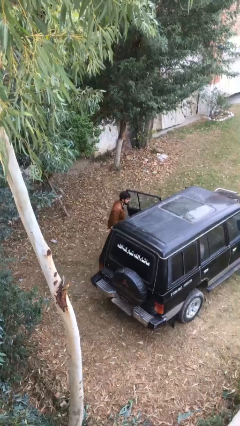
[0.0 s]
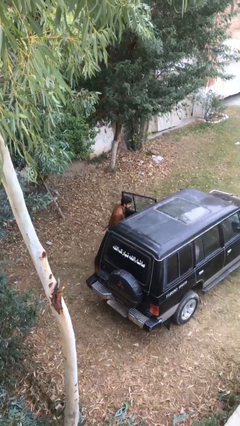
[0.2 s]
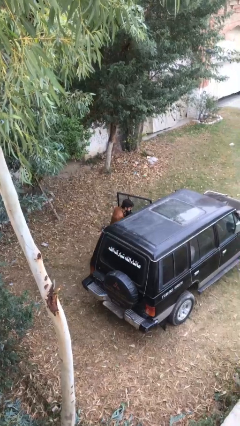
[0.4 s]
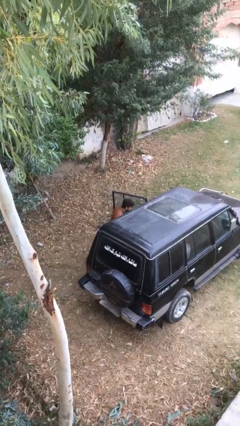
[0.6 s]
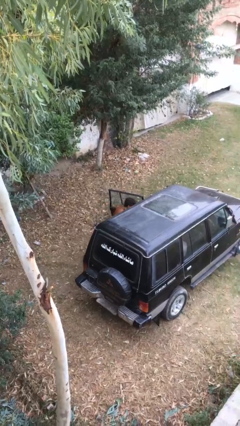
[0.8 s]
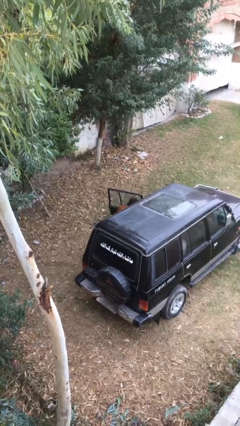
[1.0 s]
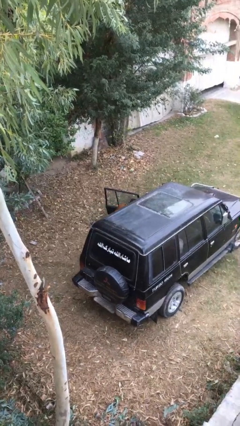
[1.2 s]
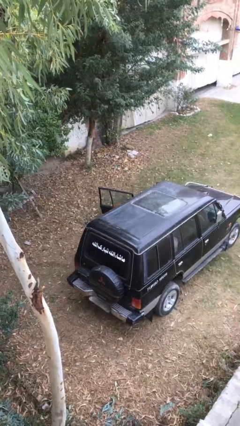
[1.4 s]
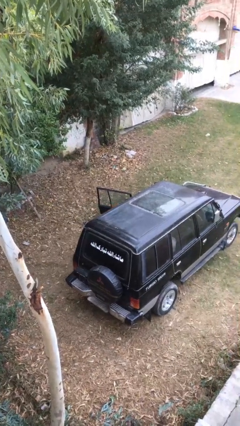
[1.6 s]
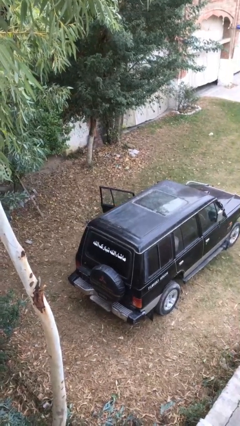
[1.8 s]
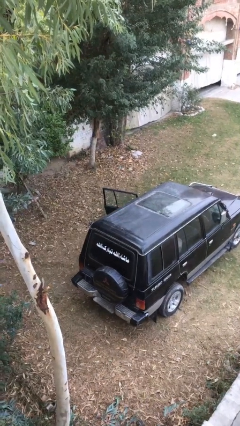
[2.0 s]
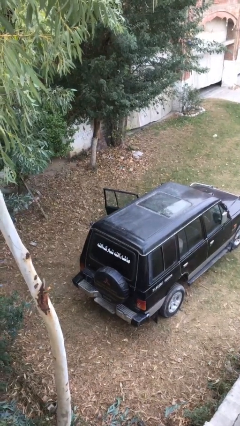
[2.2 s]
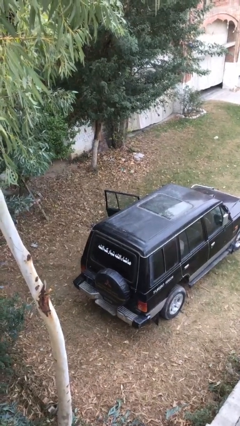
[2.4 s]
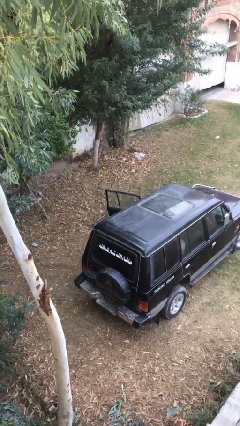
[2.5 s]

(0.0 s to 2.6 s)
person enters car

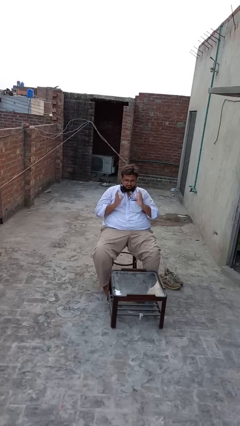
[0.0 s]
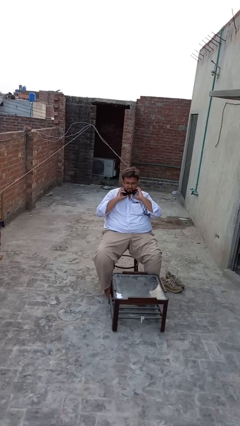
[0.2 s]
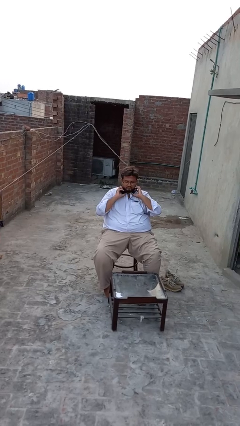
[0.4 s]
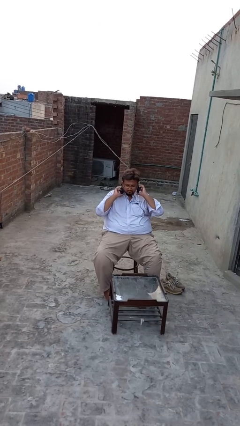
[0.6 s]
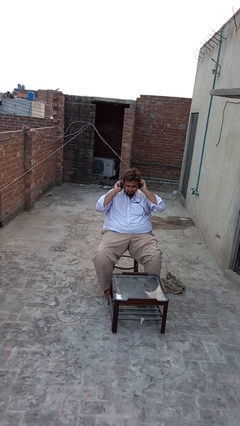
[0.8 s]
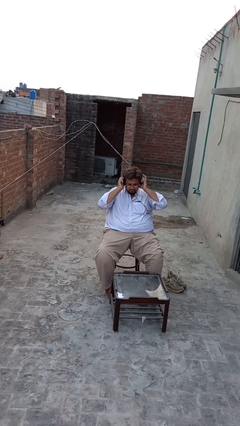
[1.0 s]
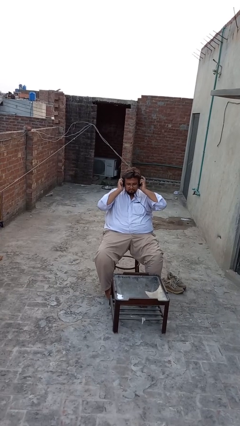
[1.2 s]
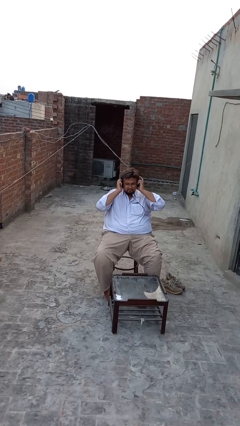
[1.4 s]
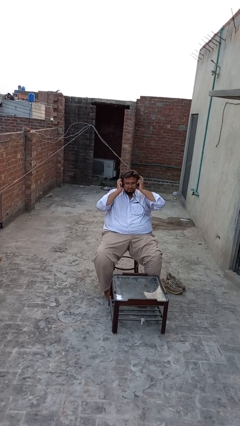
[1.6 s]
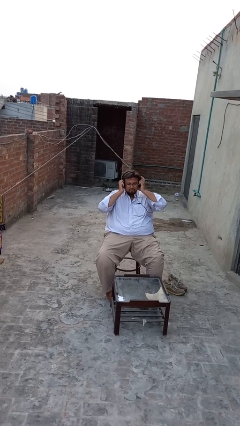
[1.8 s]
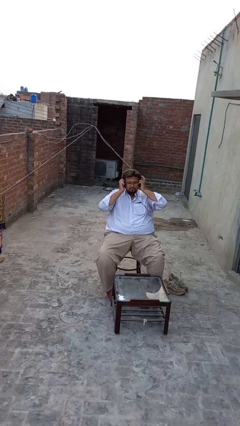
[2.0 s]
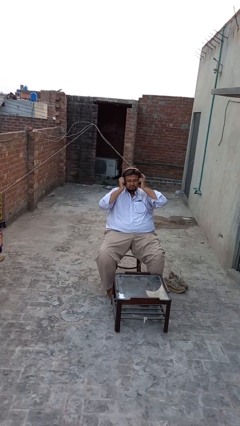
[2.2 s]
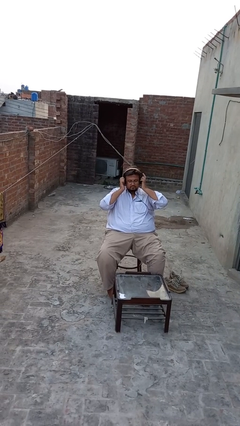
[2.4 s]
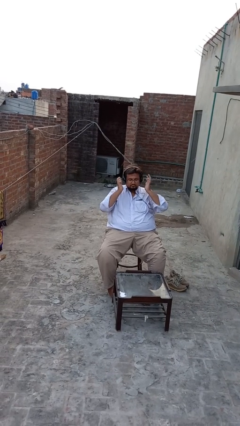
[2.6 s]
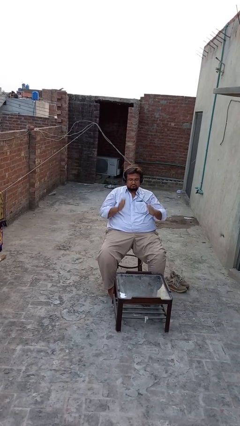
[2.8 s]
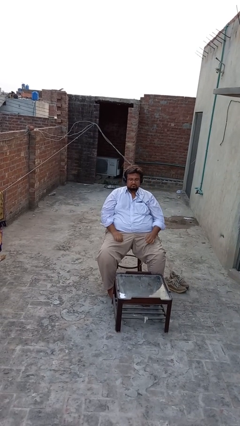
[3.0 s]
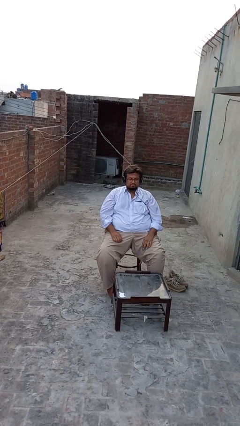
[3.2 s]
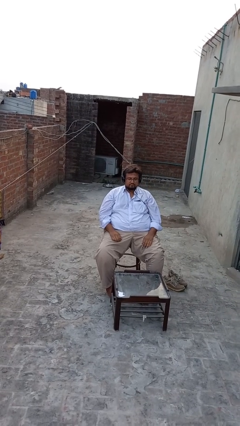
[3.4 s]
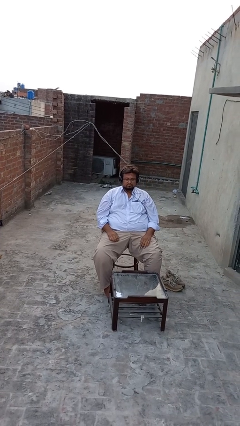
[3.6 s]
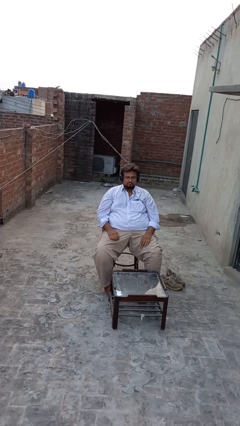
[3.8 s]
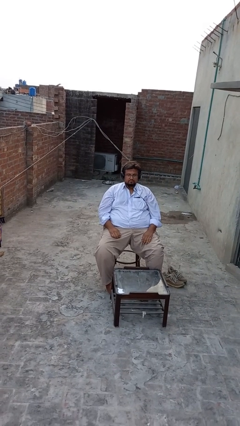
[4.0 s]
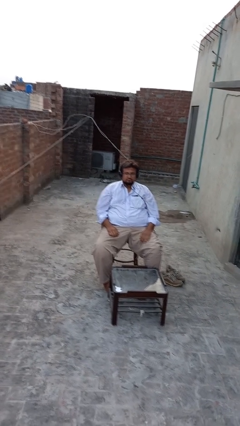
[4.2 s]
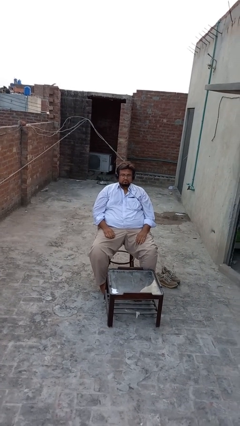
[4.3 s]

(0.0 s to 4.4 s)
person puts on headphones

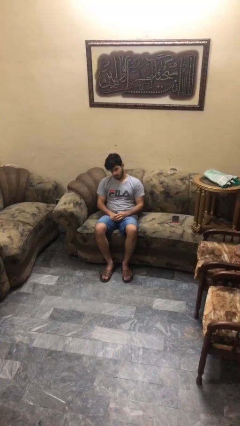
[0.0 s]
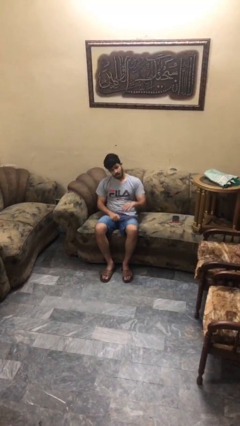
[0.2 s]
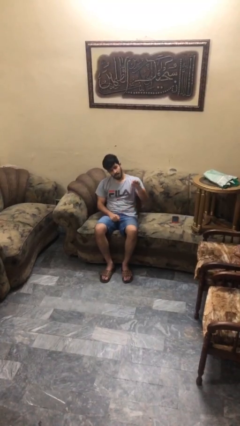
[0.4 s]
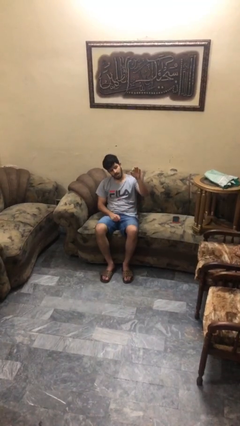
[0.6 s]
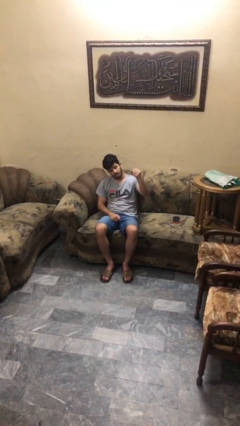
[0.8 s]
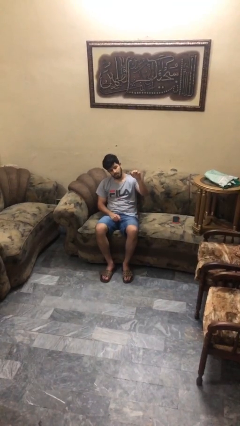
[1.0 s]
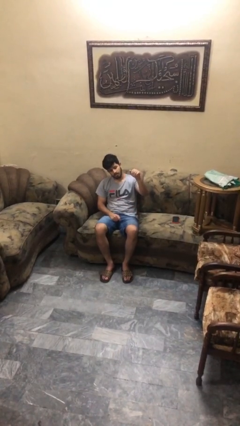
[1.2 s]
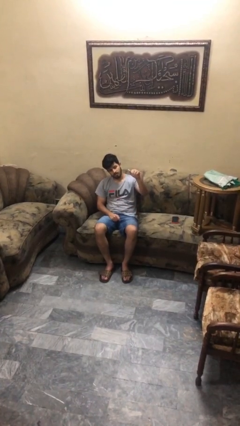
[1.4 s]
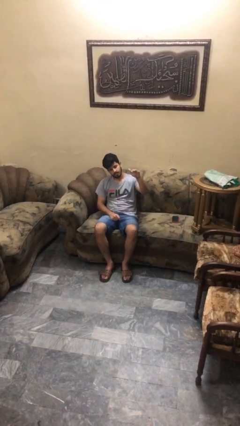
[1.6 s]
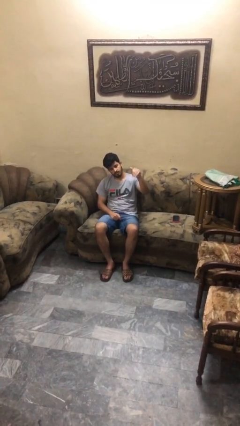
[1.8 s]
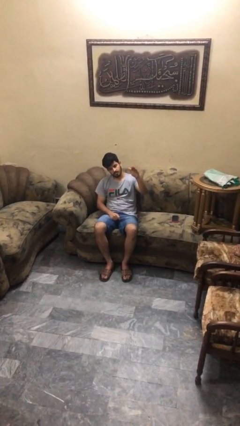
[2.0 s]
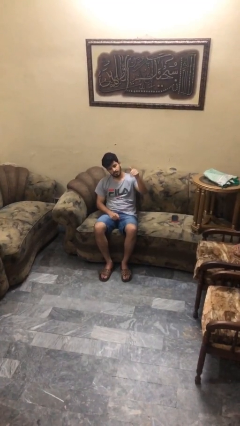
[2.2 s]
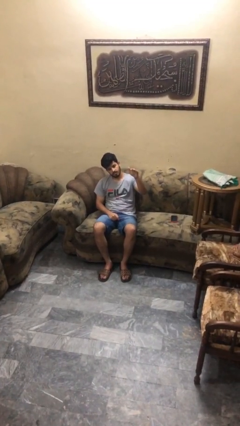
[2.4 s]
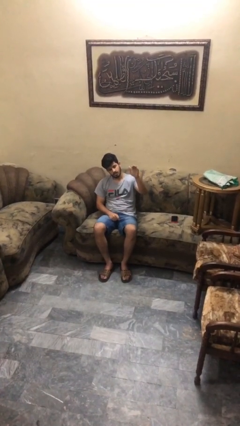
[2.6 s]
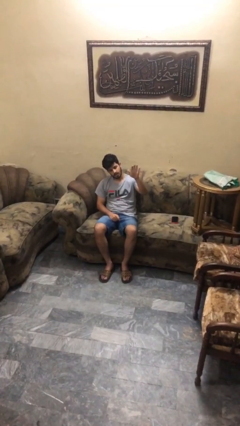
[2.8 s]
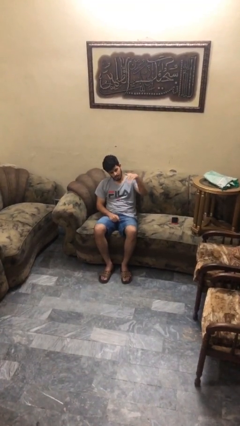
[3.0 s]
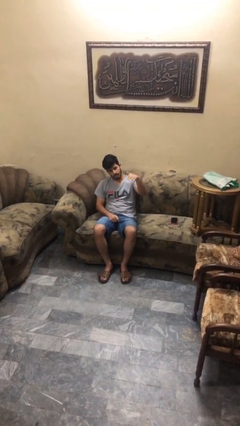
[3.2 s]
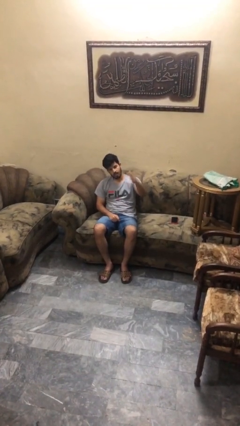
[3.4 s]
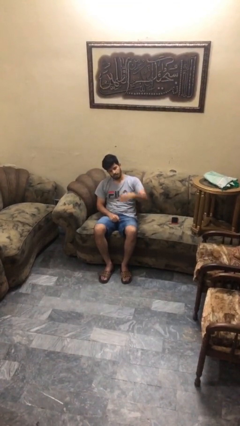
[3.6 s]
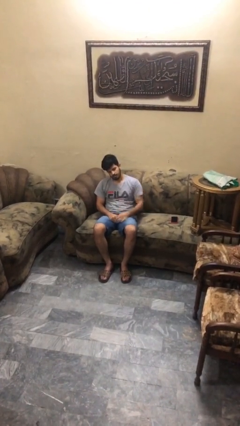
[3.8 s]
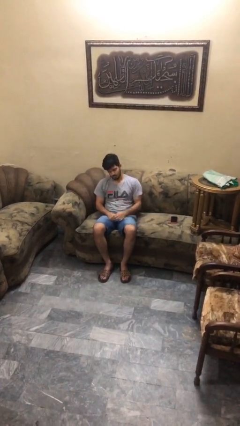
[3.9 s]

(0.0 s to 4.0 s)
person gestures come here

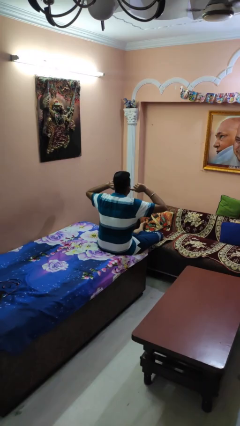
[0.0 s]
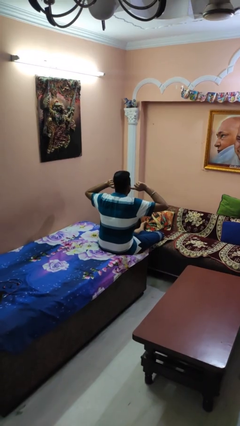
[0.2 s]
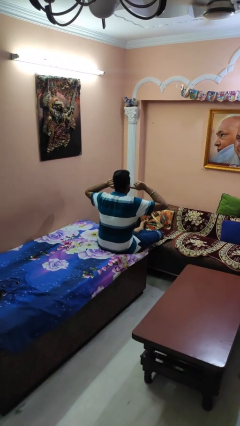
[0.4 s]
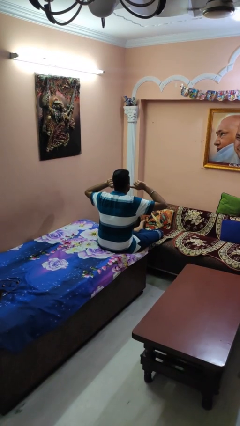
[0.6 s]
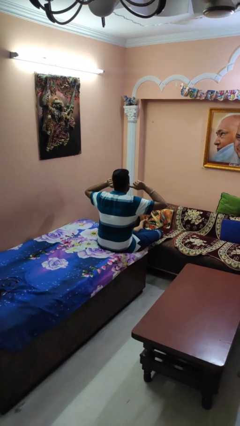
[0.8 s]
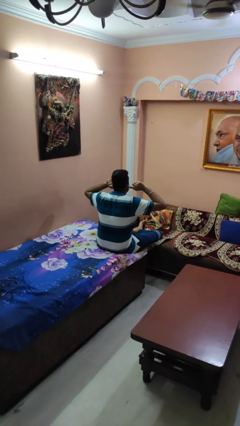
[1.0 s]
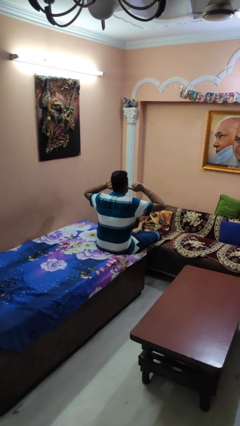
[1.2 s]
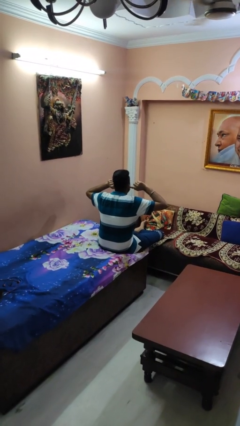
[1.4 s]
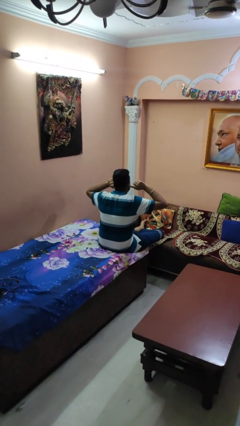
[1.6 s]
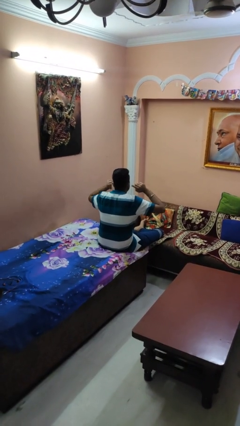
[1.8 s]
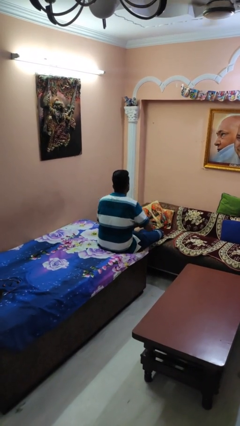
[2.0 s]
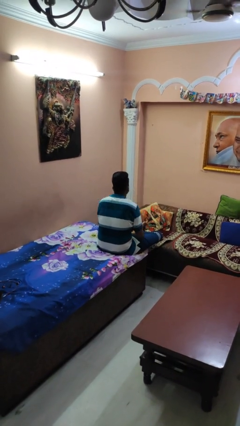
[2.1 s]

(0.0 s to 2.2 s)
person puts fingers in ear

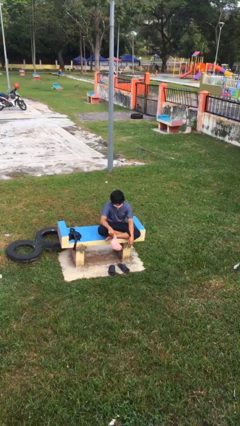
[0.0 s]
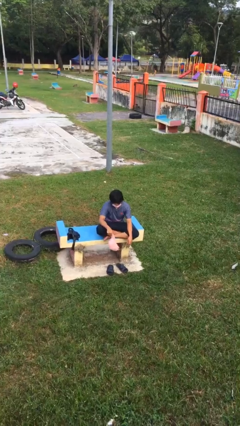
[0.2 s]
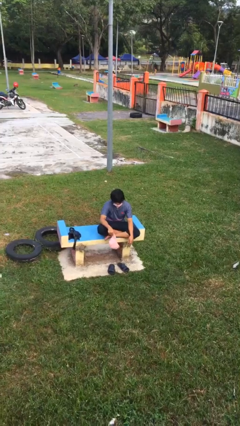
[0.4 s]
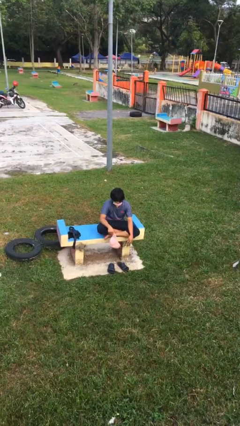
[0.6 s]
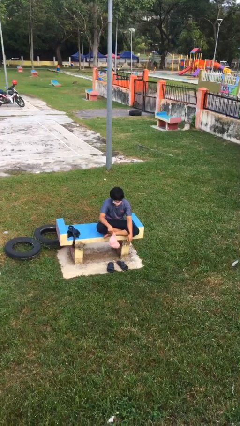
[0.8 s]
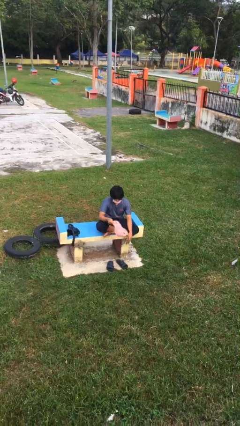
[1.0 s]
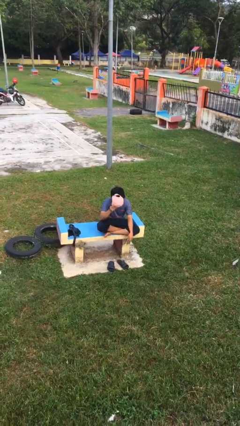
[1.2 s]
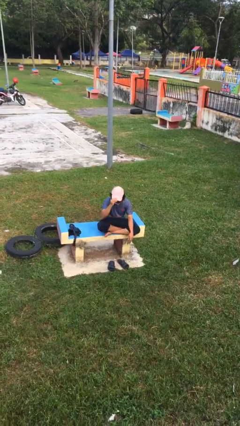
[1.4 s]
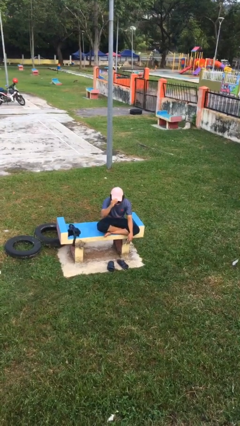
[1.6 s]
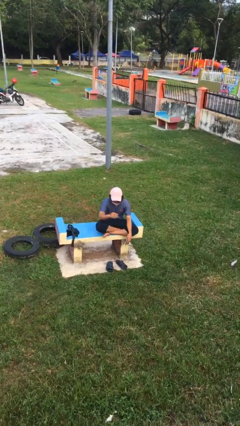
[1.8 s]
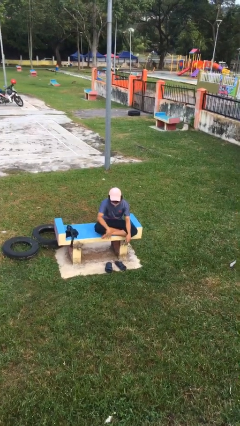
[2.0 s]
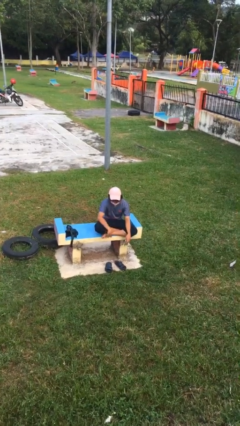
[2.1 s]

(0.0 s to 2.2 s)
person puts on hat

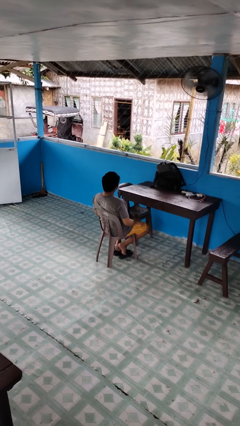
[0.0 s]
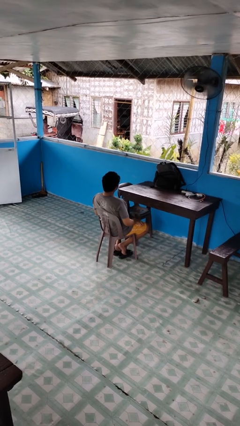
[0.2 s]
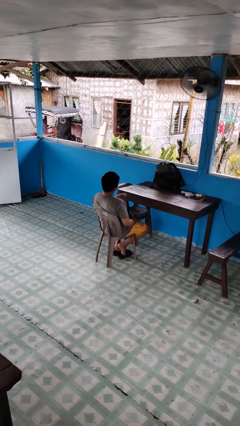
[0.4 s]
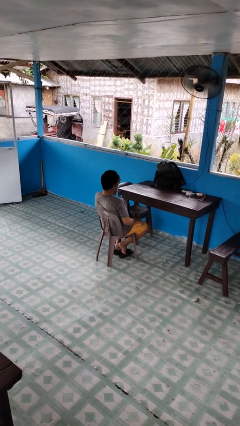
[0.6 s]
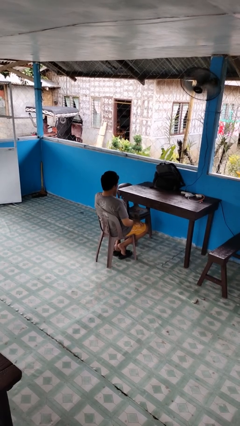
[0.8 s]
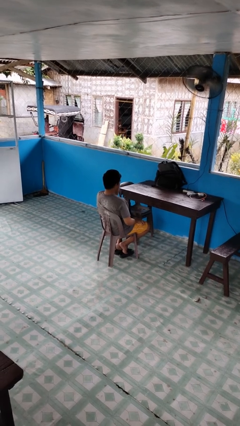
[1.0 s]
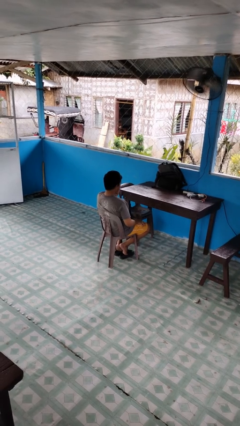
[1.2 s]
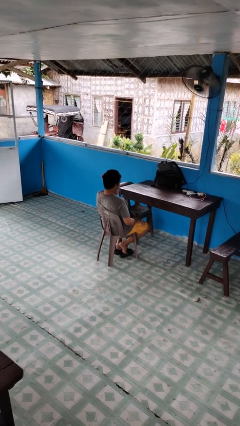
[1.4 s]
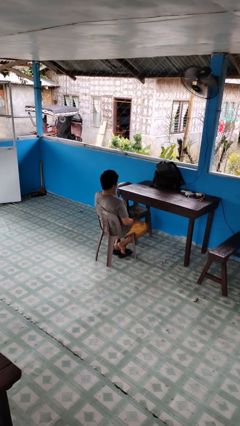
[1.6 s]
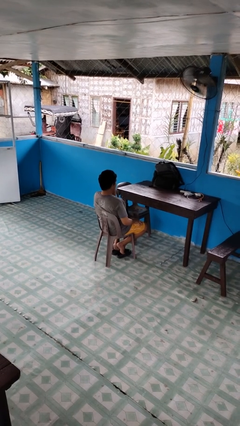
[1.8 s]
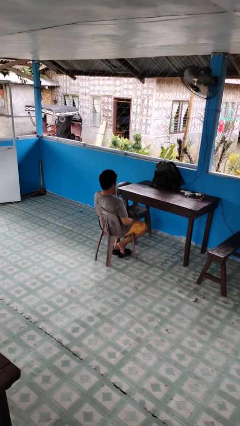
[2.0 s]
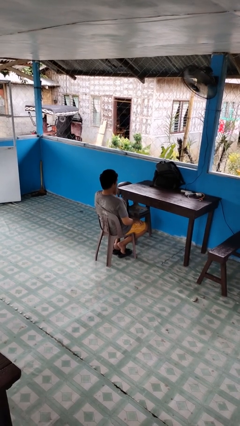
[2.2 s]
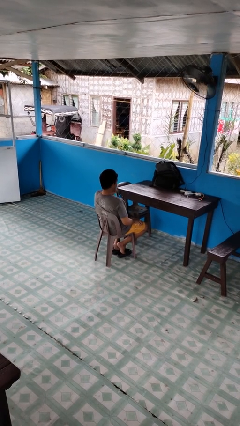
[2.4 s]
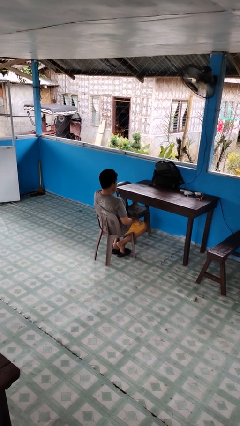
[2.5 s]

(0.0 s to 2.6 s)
person strokes hair
